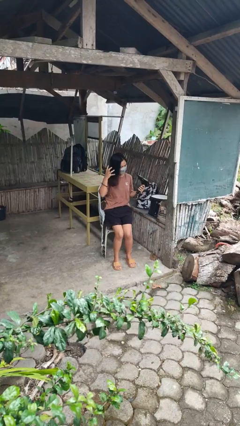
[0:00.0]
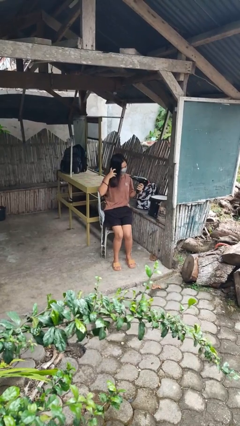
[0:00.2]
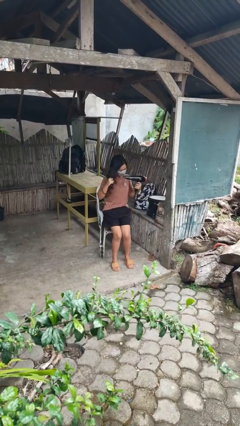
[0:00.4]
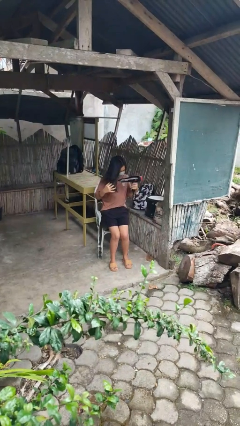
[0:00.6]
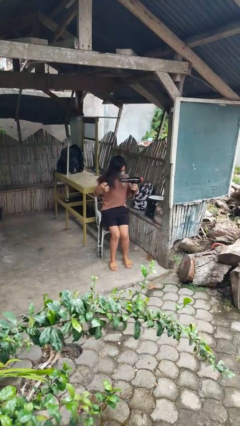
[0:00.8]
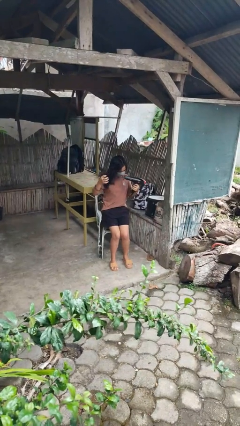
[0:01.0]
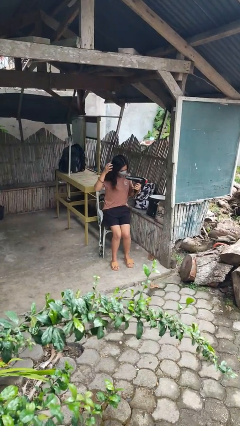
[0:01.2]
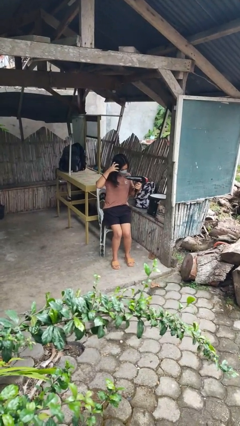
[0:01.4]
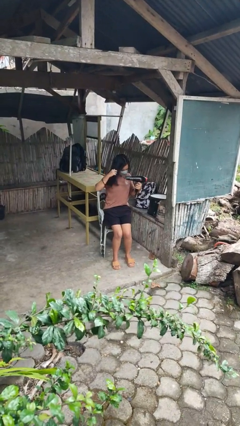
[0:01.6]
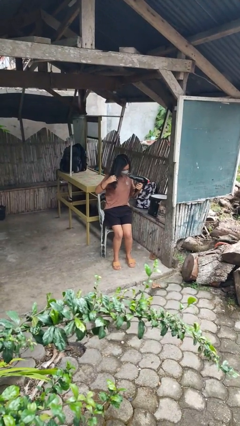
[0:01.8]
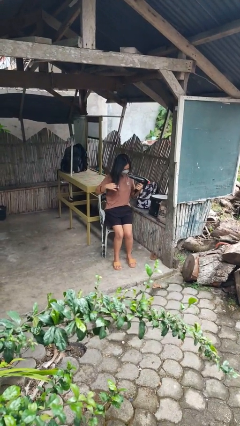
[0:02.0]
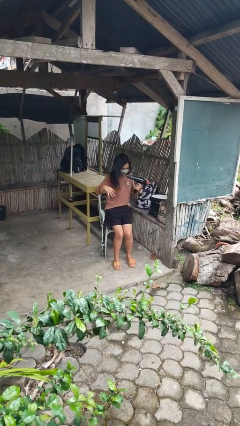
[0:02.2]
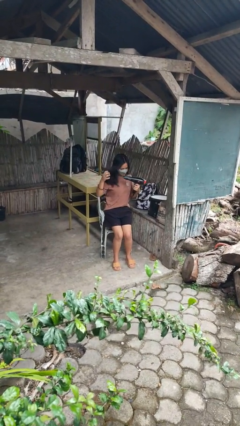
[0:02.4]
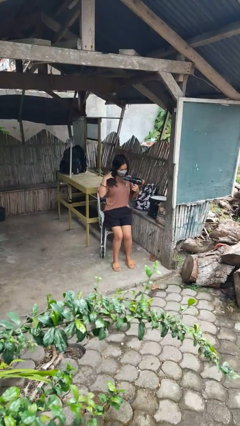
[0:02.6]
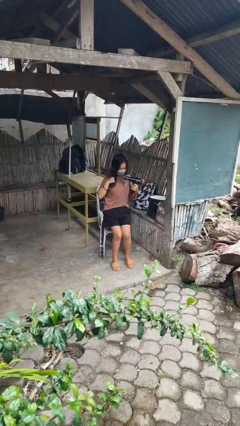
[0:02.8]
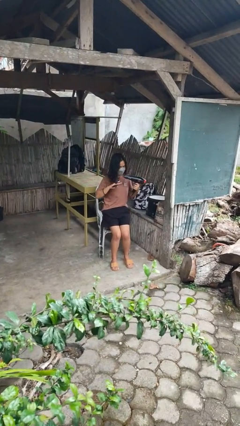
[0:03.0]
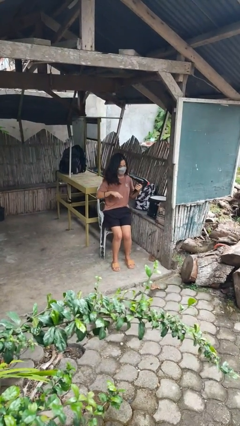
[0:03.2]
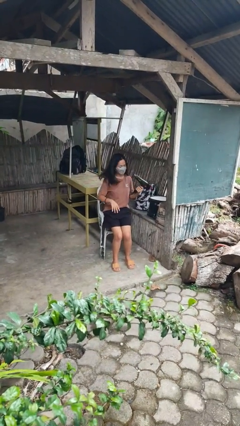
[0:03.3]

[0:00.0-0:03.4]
person dries hair with hairdryer

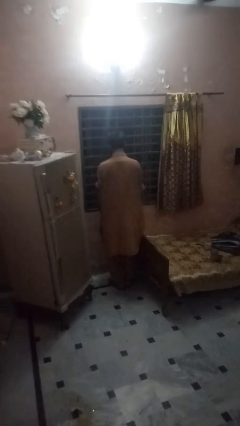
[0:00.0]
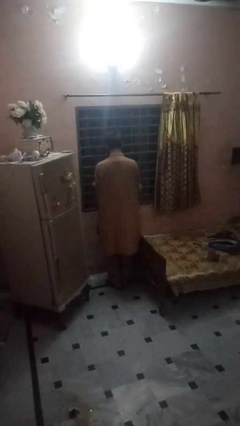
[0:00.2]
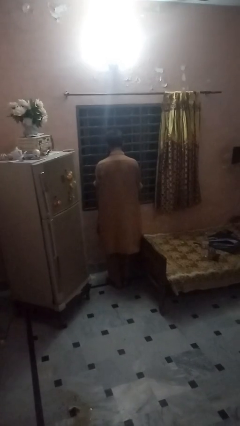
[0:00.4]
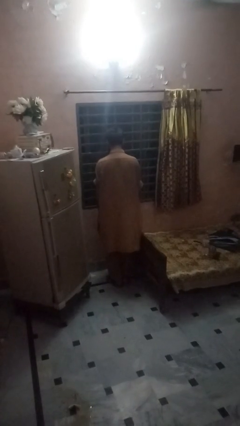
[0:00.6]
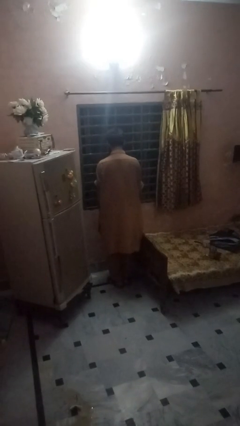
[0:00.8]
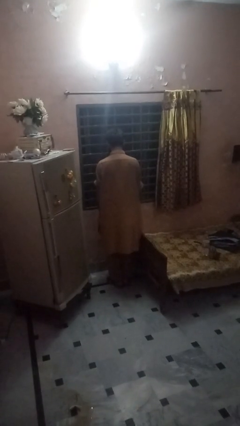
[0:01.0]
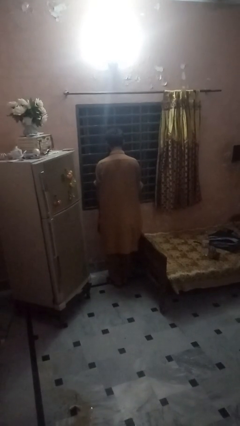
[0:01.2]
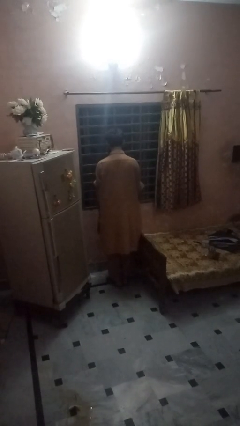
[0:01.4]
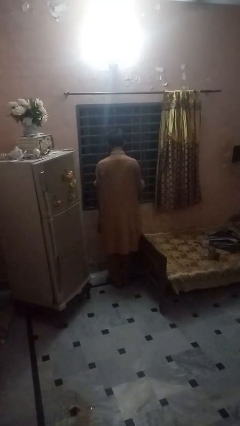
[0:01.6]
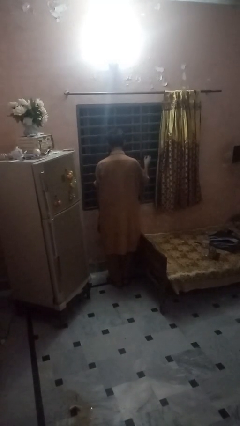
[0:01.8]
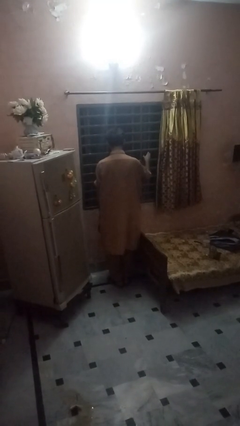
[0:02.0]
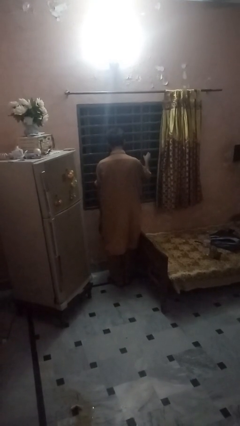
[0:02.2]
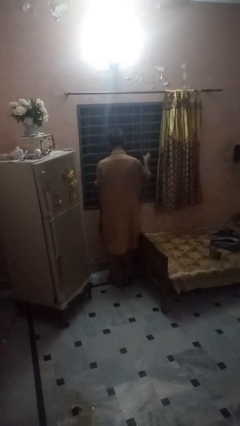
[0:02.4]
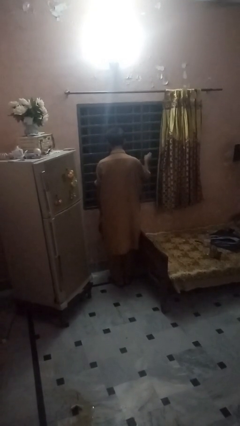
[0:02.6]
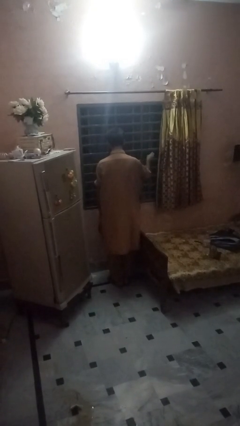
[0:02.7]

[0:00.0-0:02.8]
person opens home window

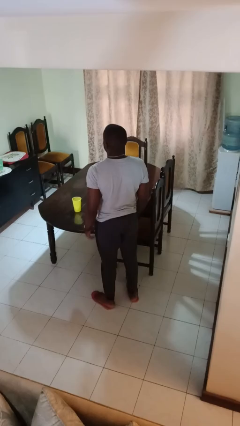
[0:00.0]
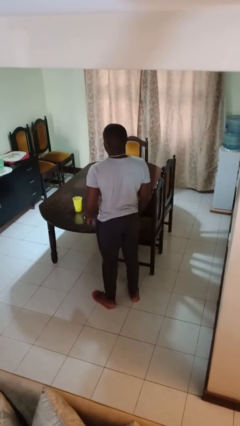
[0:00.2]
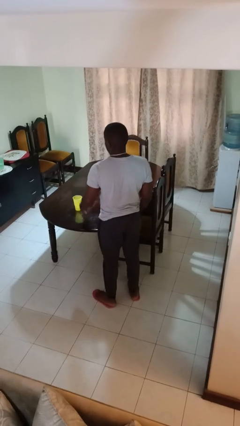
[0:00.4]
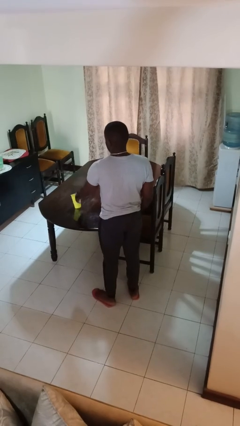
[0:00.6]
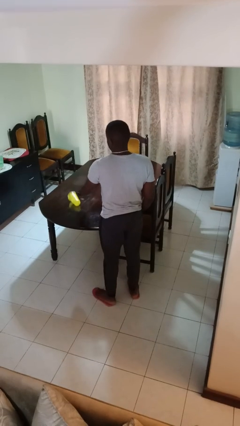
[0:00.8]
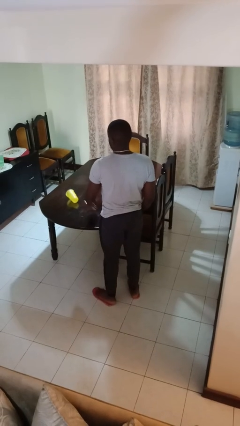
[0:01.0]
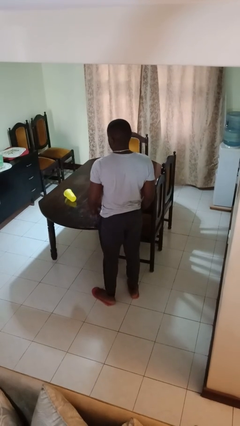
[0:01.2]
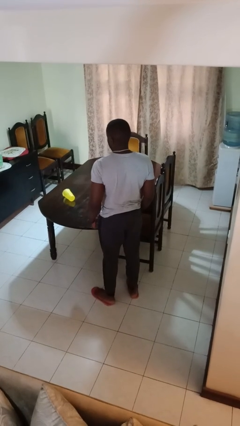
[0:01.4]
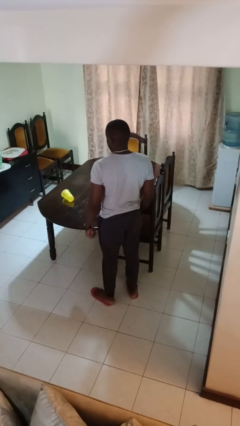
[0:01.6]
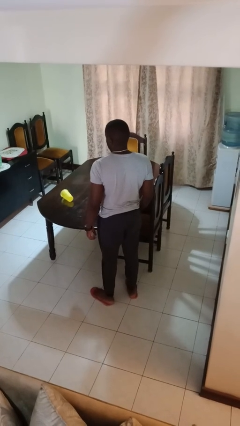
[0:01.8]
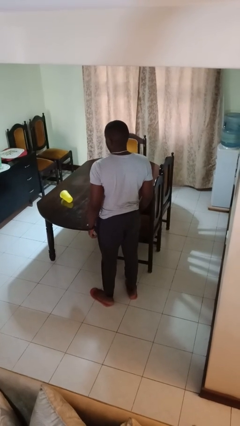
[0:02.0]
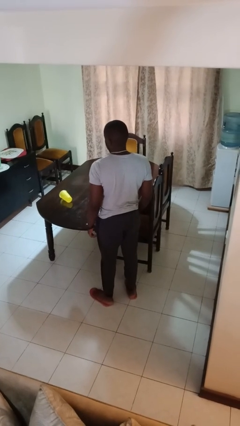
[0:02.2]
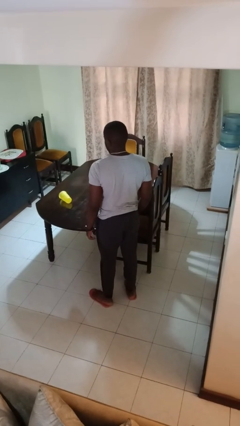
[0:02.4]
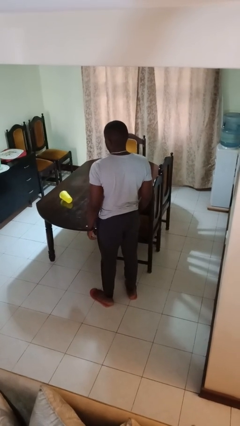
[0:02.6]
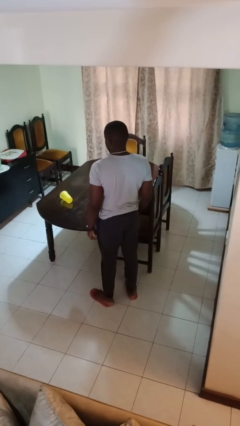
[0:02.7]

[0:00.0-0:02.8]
person knocks over glass

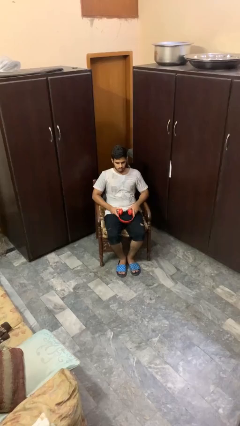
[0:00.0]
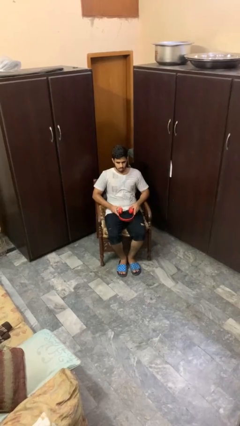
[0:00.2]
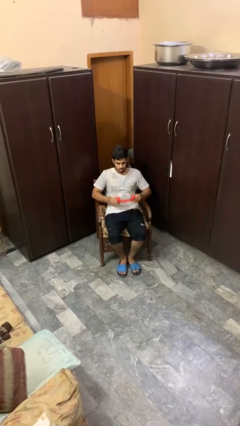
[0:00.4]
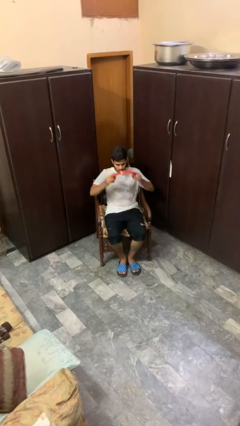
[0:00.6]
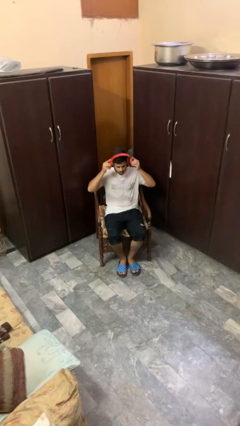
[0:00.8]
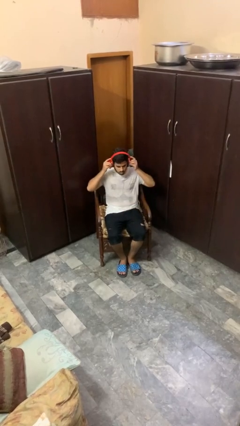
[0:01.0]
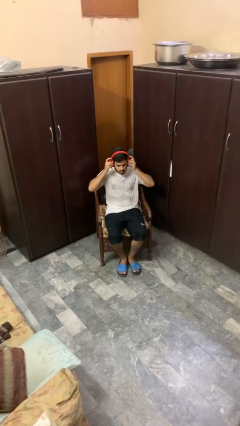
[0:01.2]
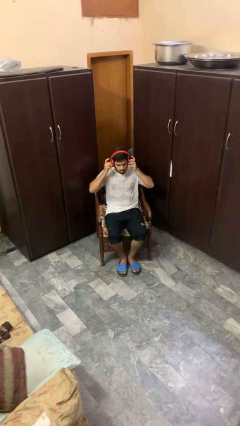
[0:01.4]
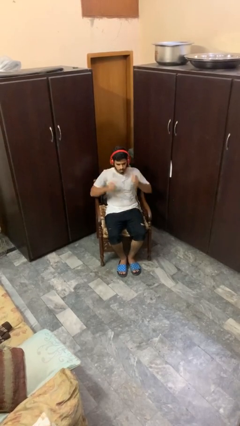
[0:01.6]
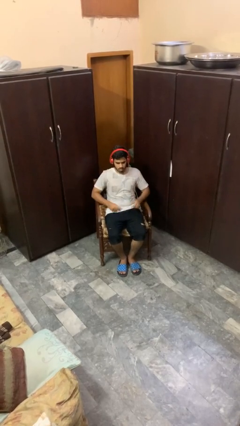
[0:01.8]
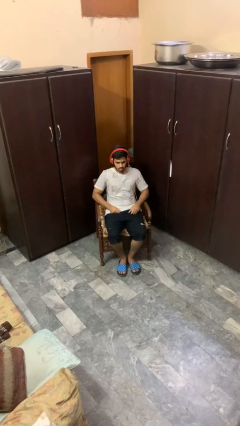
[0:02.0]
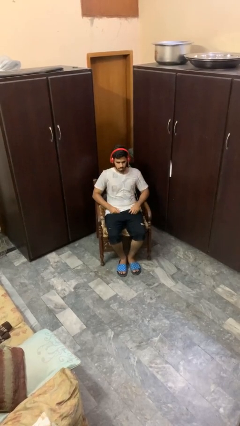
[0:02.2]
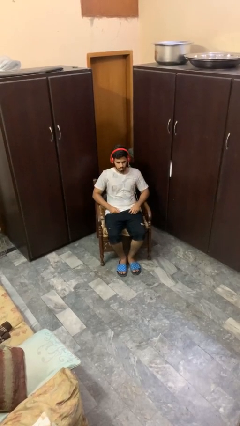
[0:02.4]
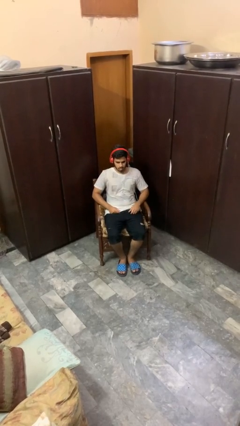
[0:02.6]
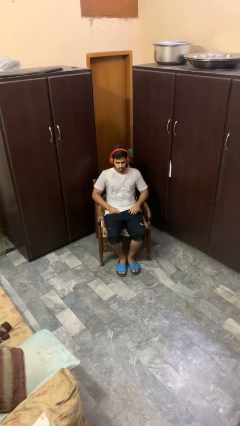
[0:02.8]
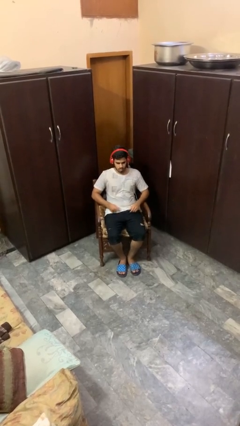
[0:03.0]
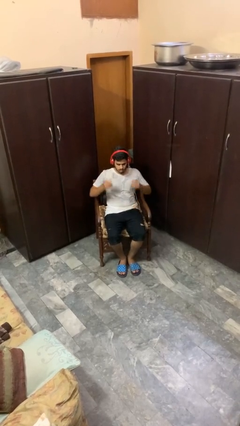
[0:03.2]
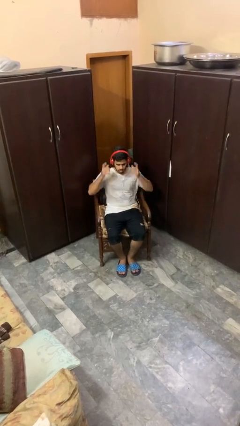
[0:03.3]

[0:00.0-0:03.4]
person puts on headphones

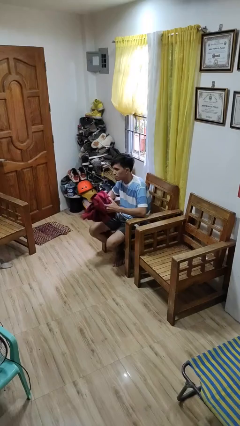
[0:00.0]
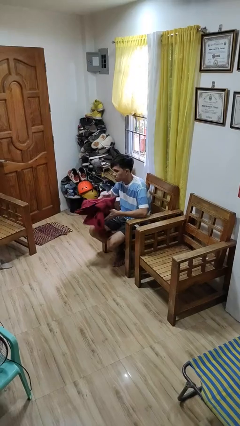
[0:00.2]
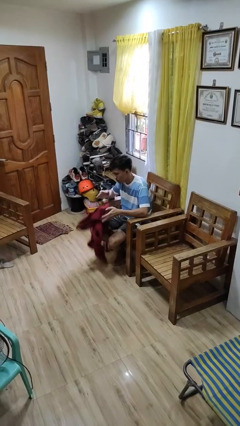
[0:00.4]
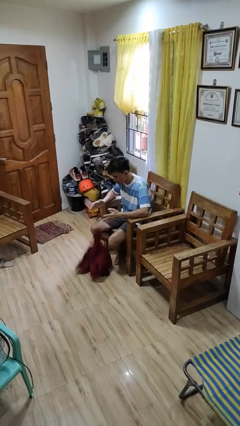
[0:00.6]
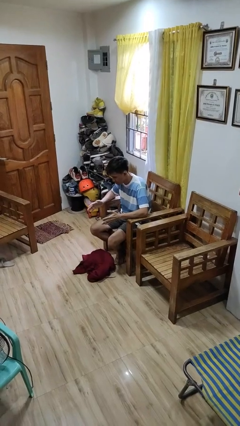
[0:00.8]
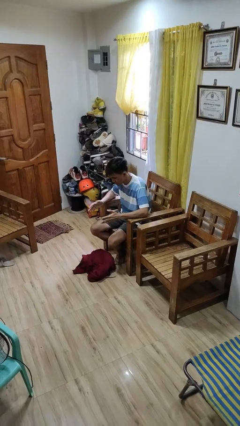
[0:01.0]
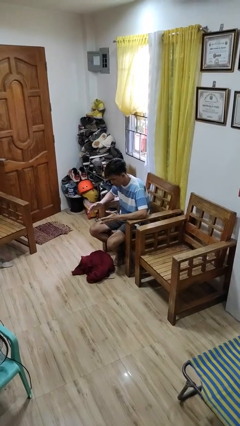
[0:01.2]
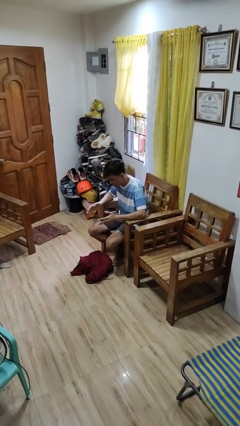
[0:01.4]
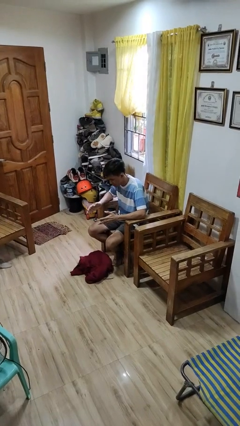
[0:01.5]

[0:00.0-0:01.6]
person drops object

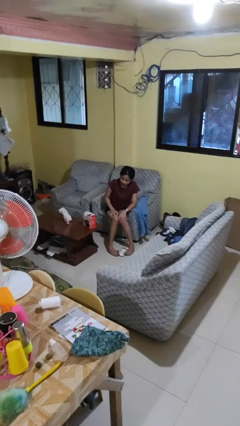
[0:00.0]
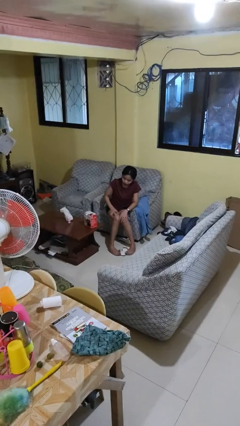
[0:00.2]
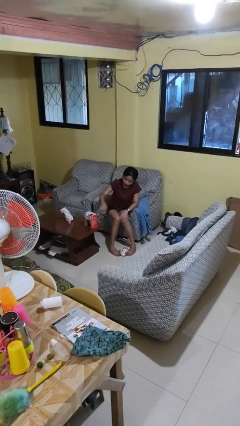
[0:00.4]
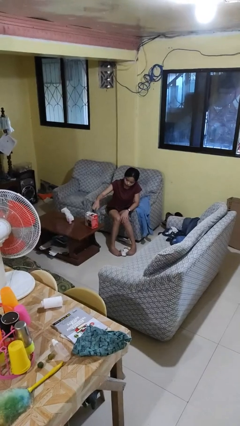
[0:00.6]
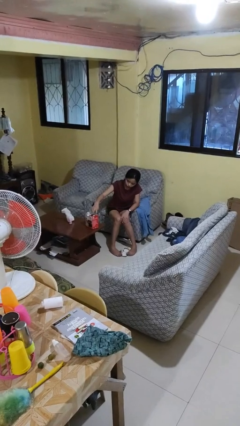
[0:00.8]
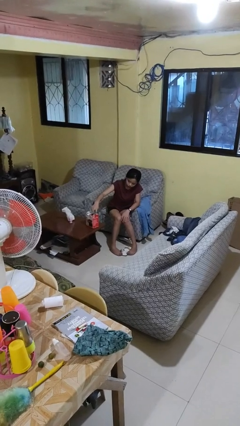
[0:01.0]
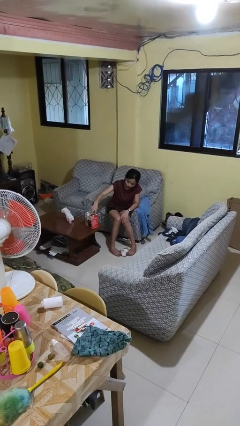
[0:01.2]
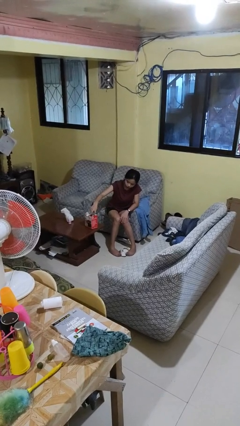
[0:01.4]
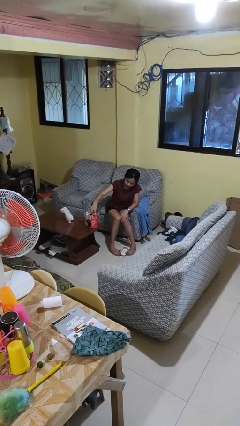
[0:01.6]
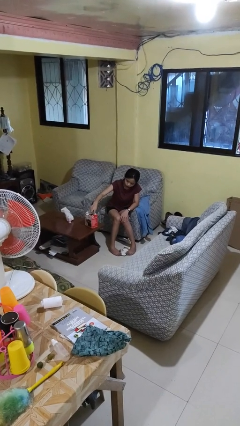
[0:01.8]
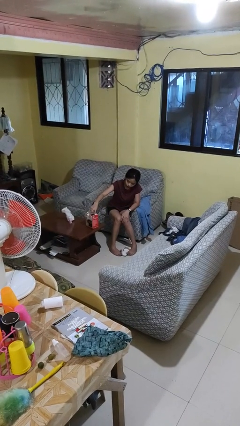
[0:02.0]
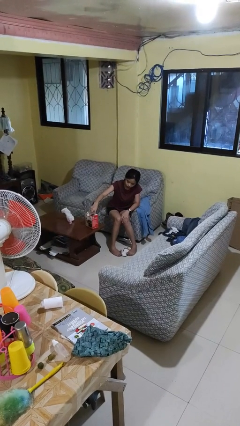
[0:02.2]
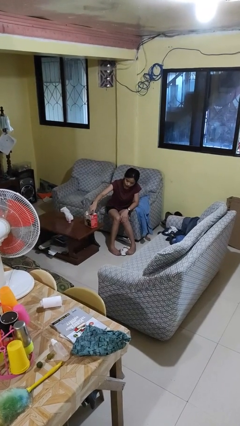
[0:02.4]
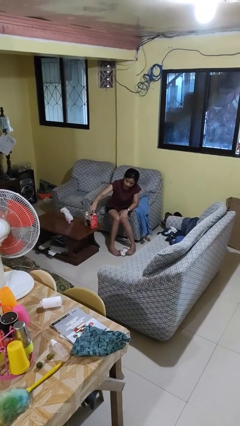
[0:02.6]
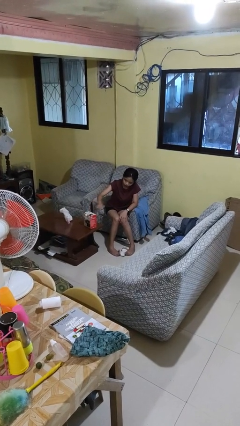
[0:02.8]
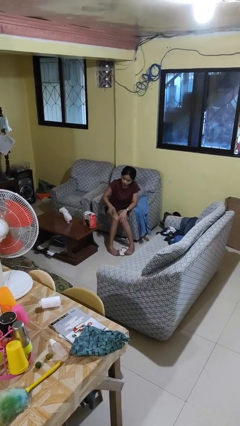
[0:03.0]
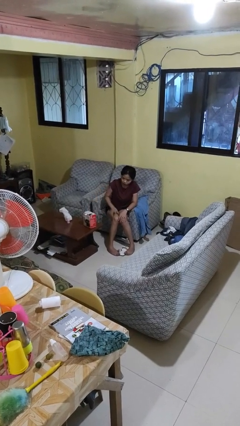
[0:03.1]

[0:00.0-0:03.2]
person taps object with finger
